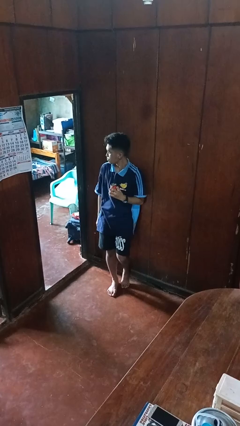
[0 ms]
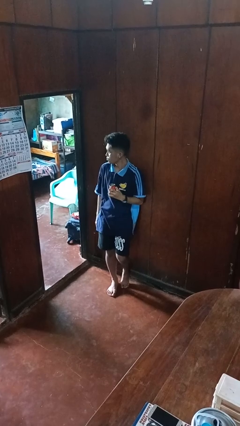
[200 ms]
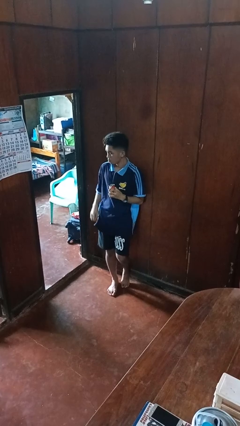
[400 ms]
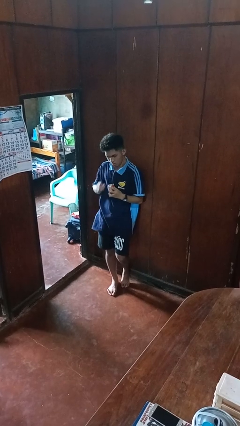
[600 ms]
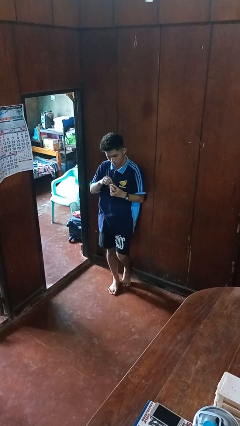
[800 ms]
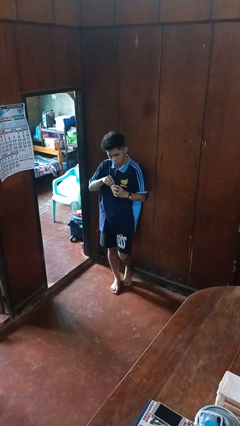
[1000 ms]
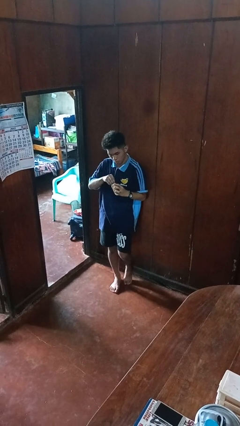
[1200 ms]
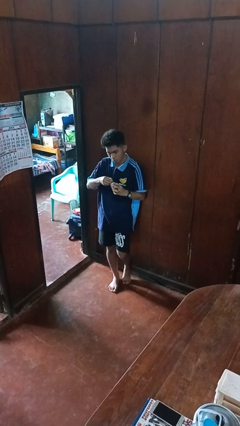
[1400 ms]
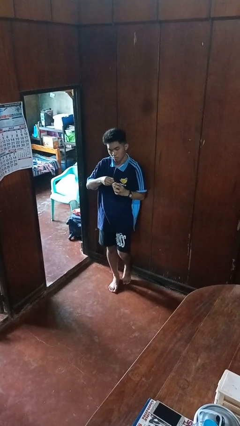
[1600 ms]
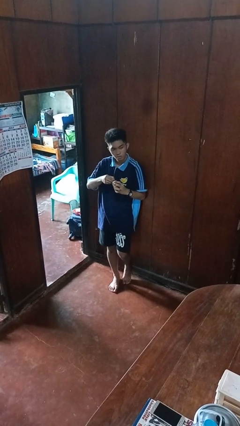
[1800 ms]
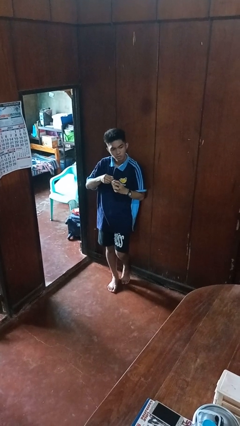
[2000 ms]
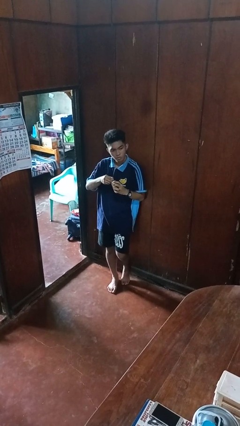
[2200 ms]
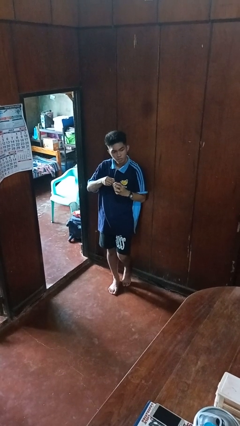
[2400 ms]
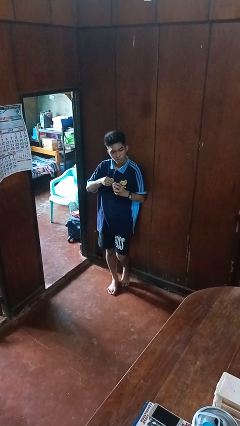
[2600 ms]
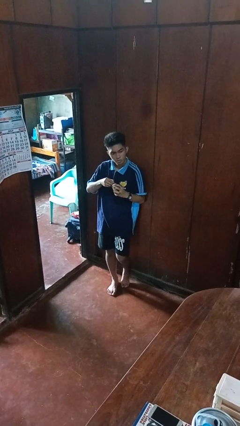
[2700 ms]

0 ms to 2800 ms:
person opens beverage can

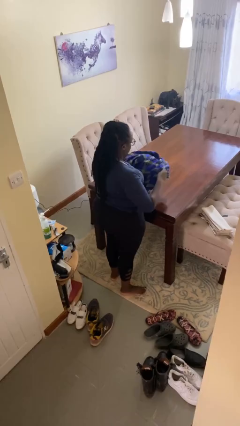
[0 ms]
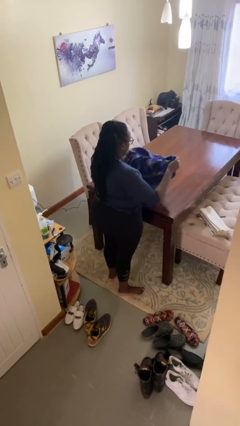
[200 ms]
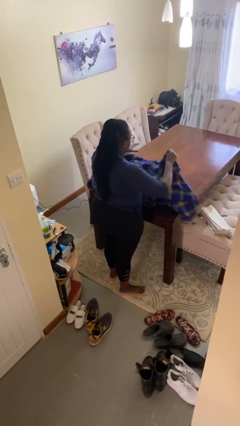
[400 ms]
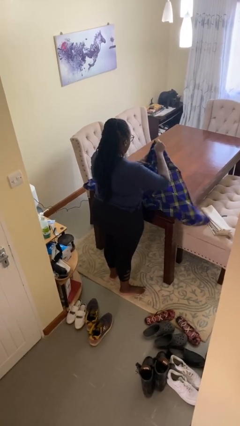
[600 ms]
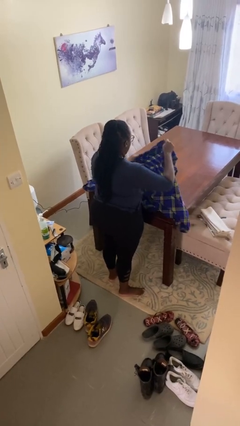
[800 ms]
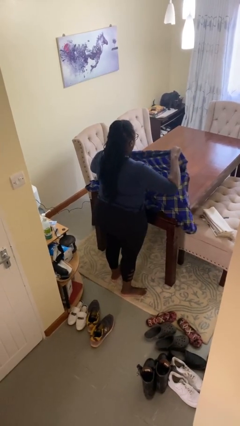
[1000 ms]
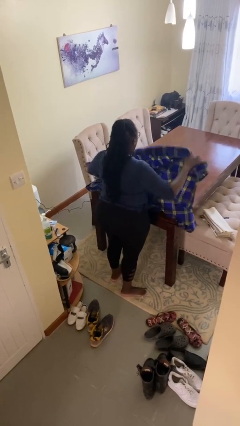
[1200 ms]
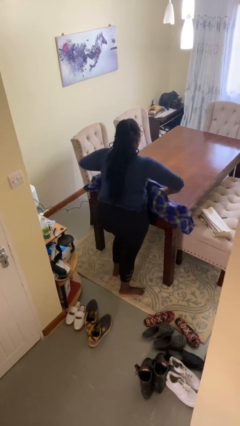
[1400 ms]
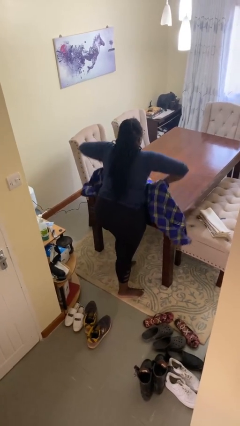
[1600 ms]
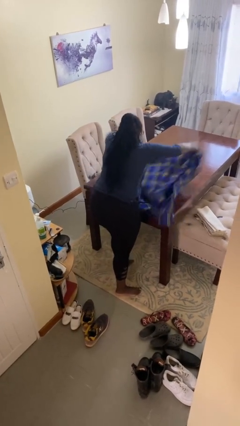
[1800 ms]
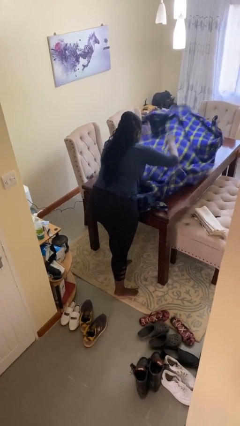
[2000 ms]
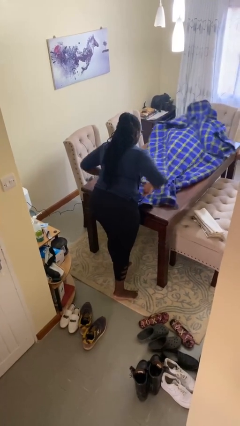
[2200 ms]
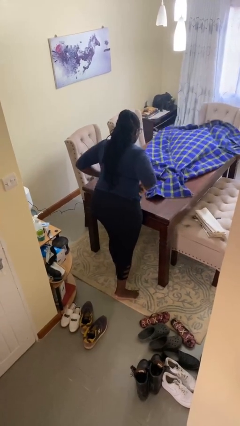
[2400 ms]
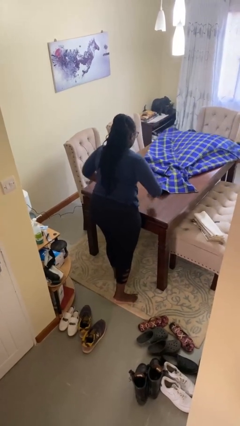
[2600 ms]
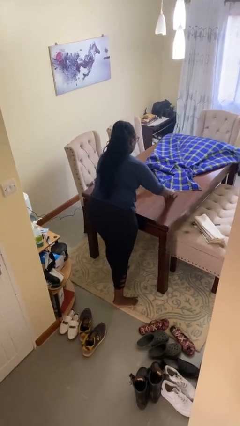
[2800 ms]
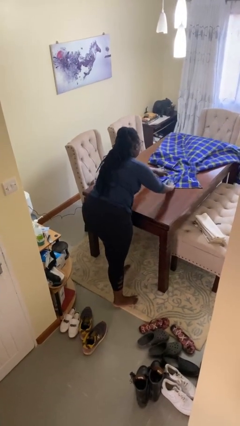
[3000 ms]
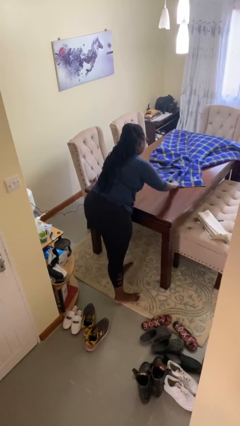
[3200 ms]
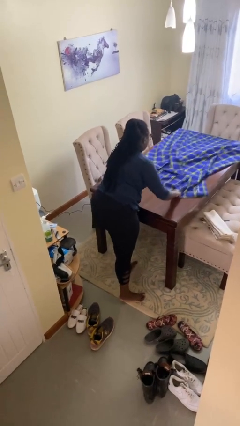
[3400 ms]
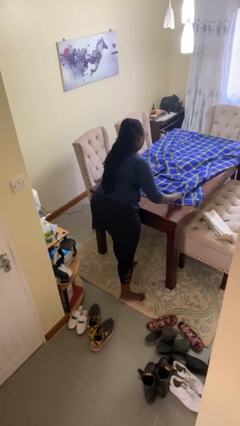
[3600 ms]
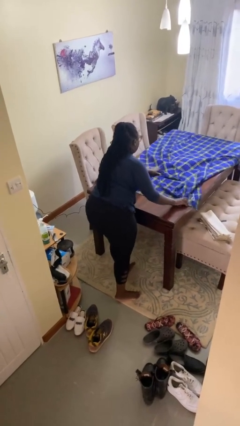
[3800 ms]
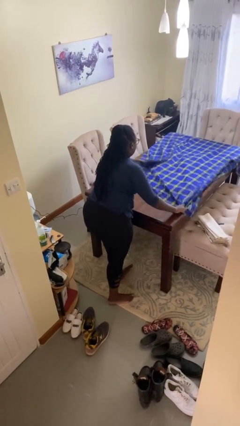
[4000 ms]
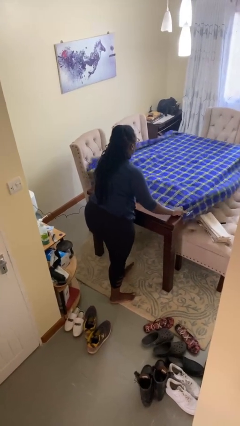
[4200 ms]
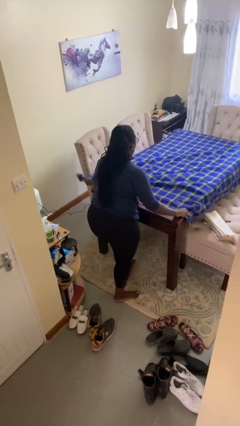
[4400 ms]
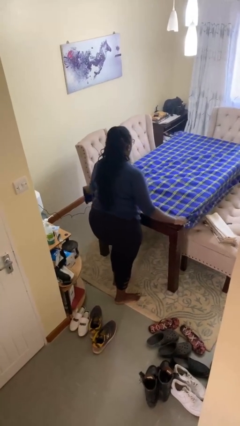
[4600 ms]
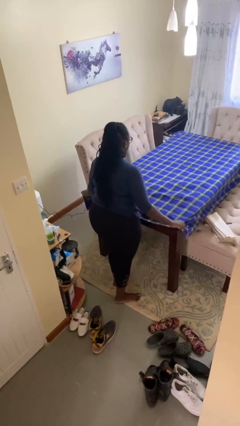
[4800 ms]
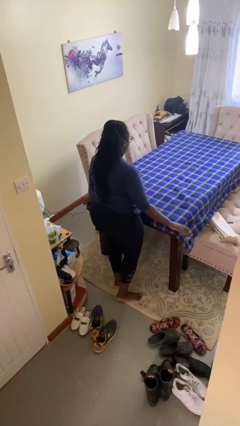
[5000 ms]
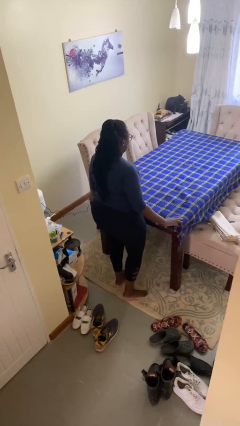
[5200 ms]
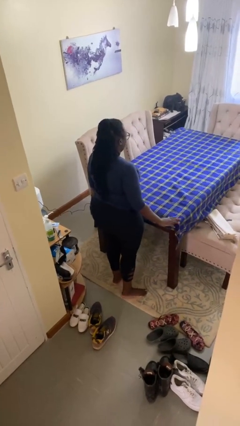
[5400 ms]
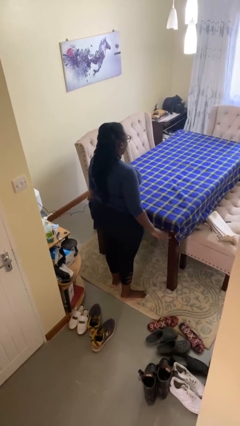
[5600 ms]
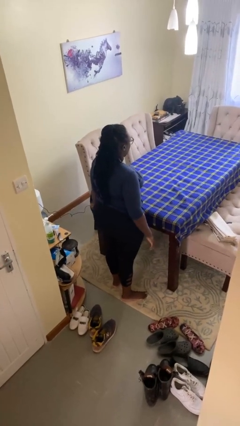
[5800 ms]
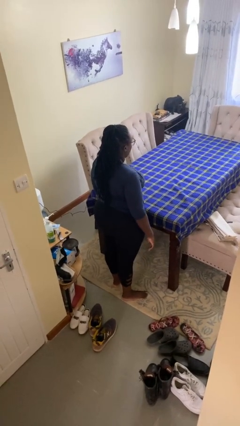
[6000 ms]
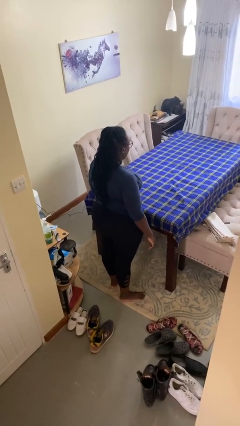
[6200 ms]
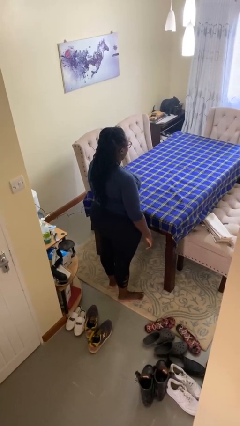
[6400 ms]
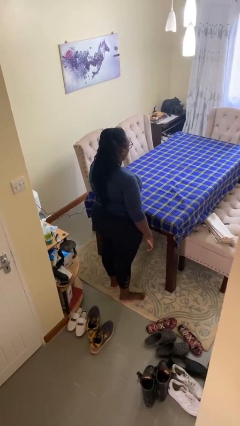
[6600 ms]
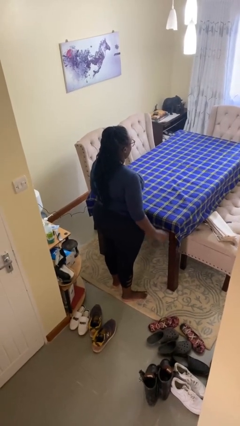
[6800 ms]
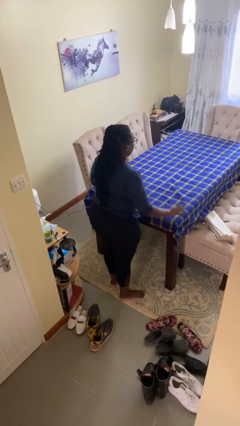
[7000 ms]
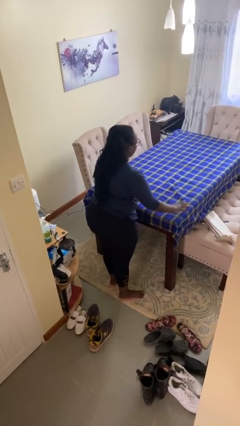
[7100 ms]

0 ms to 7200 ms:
person spreads tablecloth

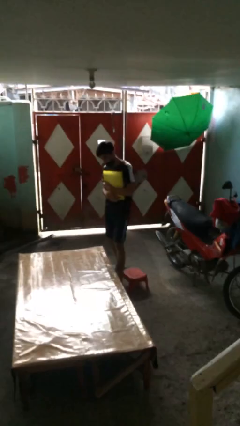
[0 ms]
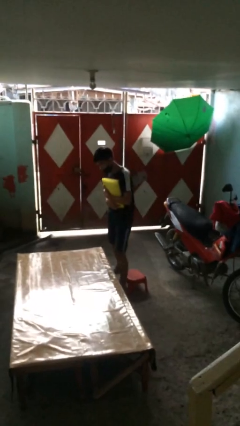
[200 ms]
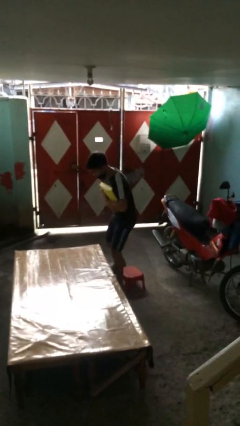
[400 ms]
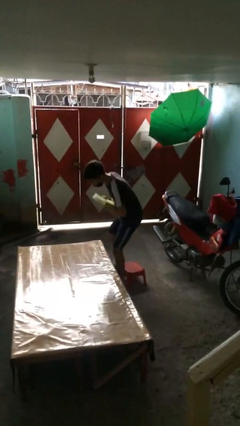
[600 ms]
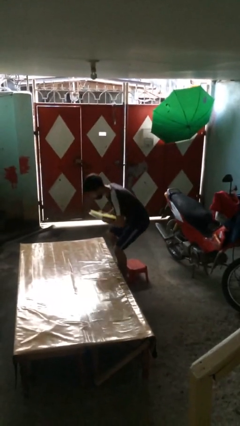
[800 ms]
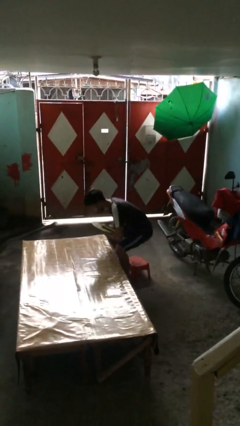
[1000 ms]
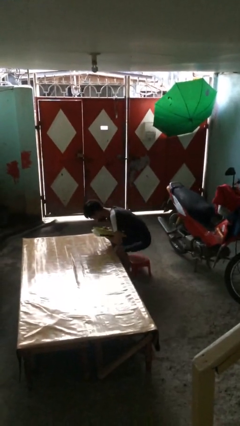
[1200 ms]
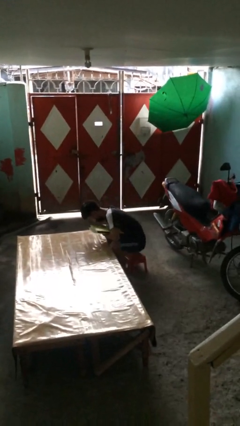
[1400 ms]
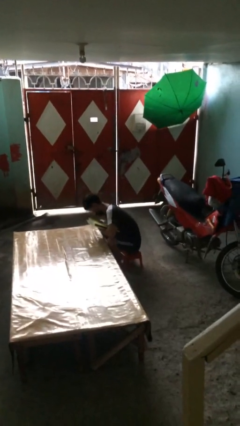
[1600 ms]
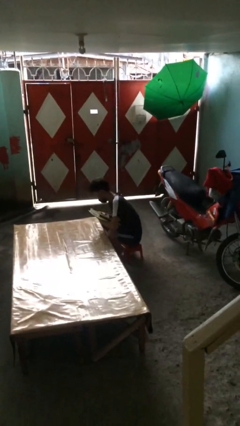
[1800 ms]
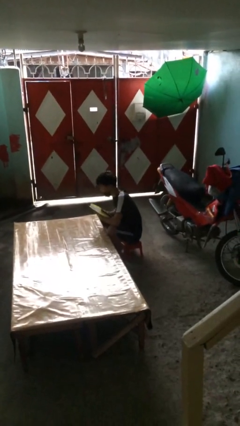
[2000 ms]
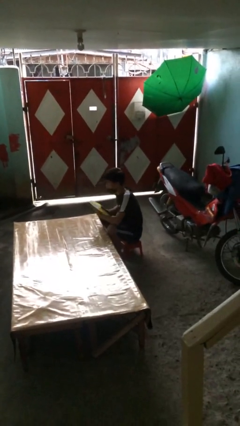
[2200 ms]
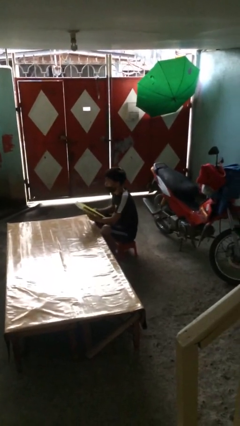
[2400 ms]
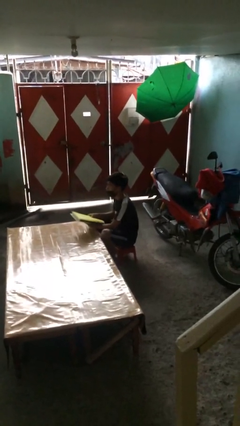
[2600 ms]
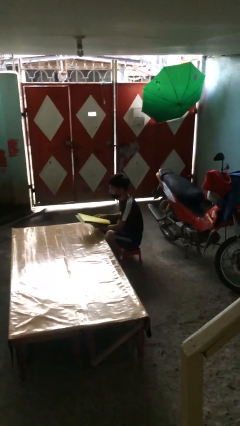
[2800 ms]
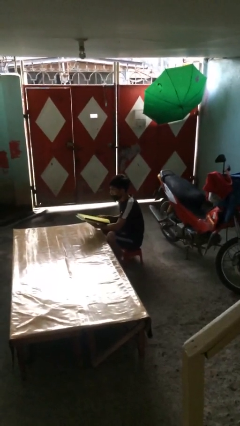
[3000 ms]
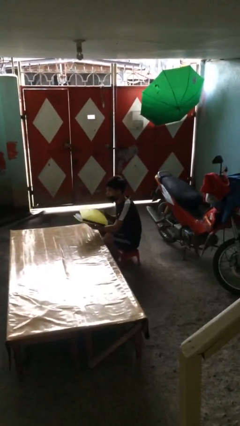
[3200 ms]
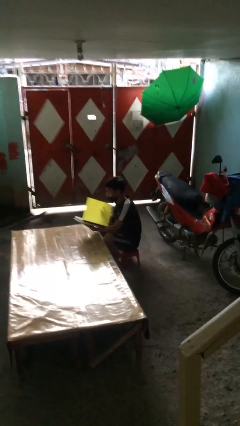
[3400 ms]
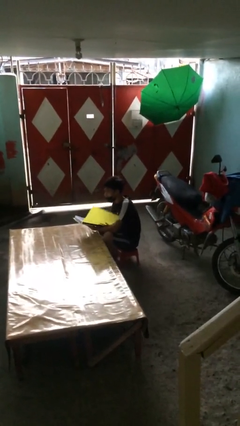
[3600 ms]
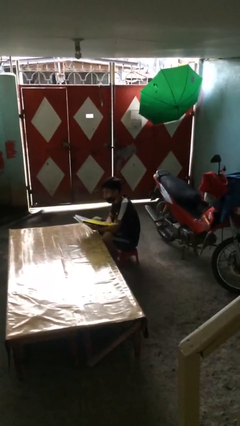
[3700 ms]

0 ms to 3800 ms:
person sits down

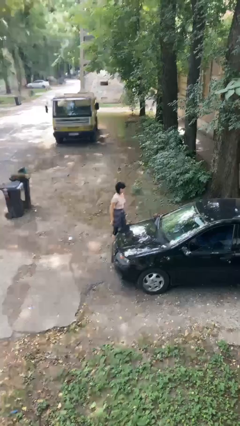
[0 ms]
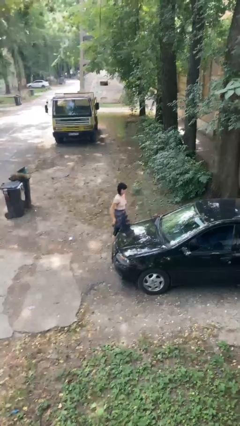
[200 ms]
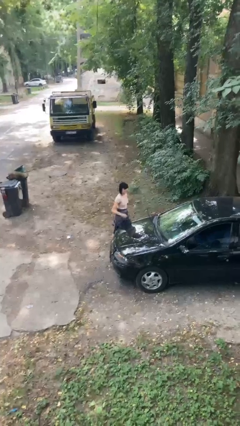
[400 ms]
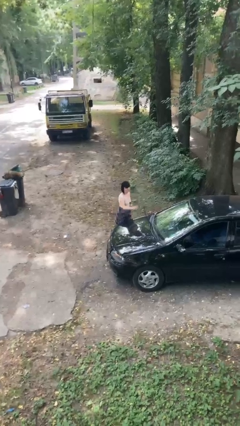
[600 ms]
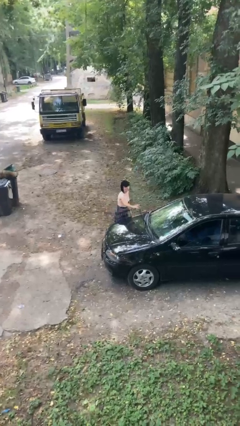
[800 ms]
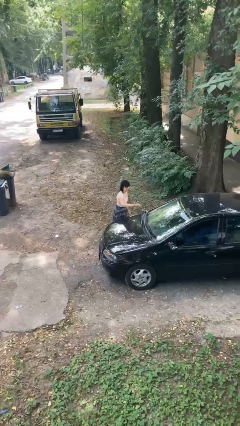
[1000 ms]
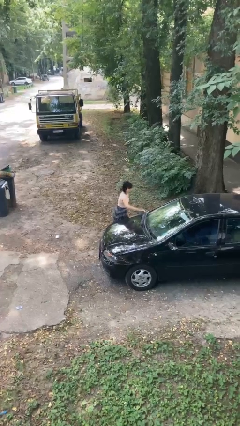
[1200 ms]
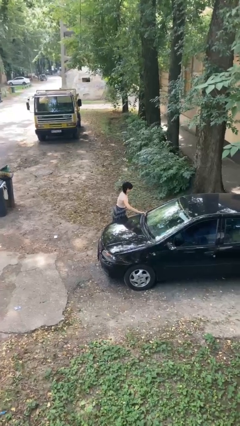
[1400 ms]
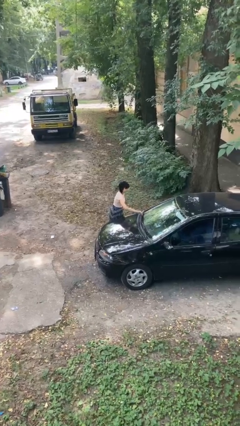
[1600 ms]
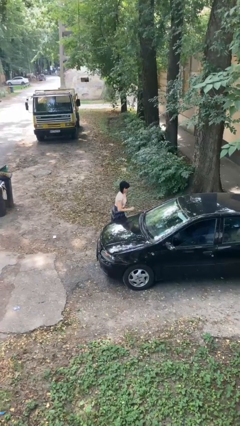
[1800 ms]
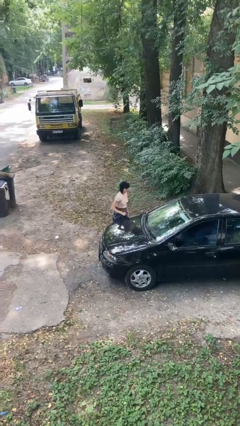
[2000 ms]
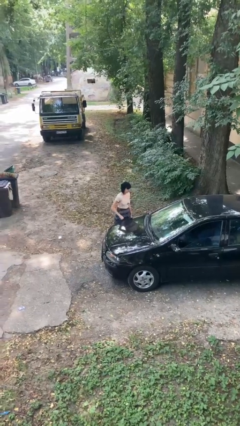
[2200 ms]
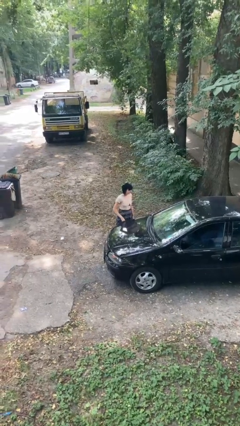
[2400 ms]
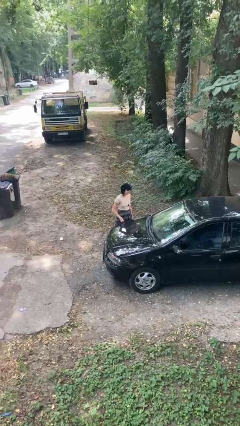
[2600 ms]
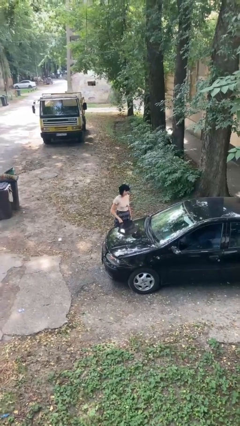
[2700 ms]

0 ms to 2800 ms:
person flips down car wipers

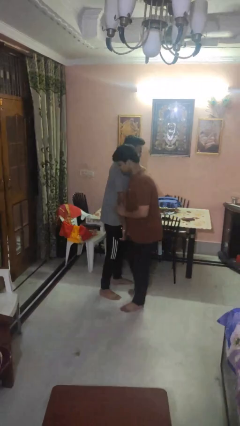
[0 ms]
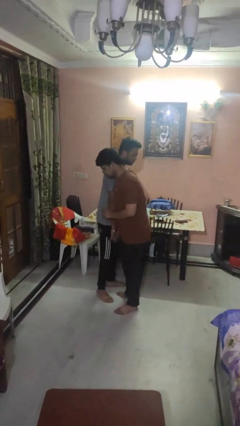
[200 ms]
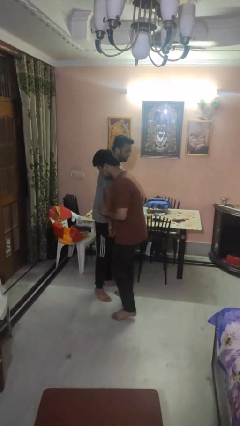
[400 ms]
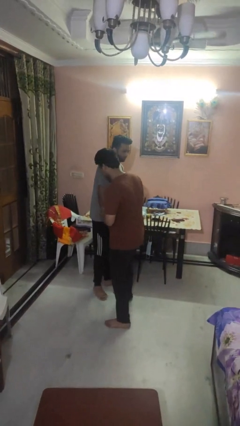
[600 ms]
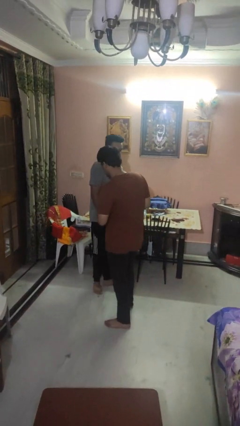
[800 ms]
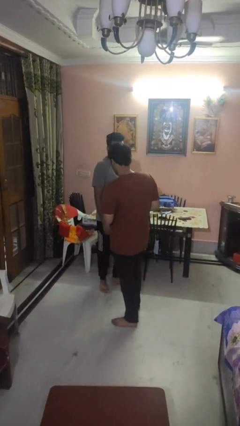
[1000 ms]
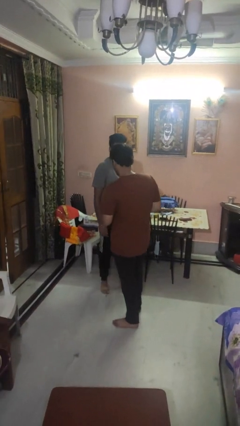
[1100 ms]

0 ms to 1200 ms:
person bumps into person
